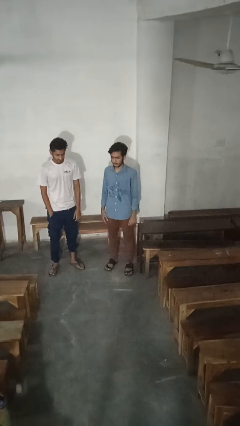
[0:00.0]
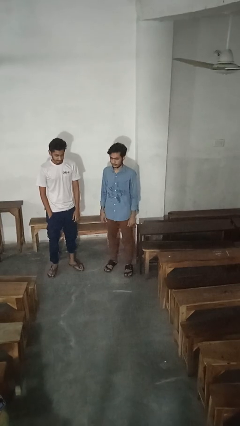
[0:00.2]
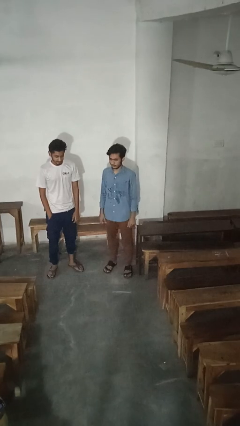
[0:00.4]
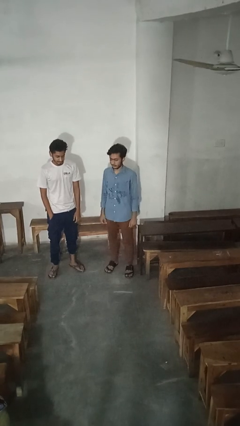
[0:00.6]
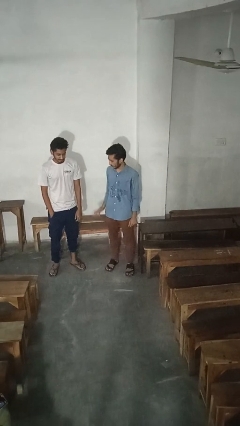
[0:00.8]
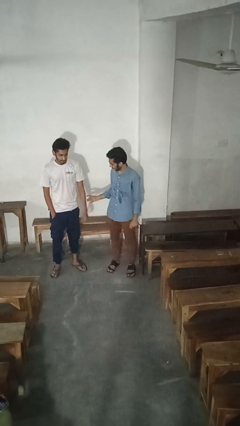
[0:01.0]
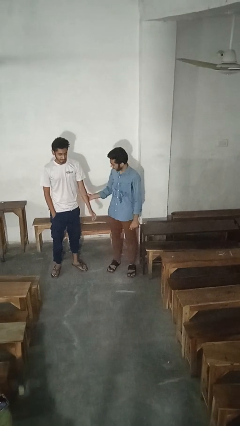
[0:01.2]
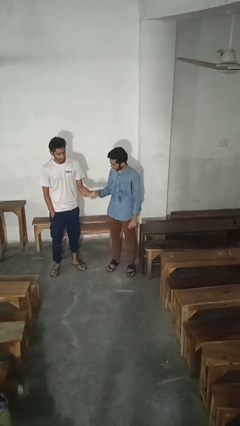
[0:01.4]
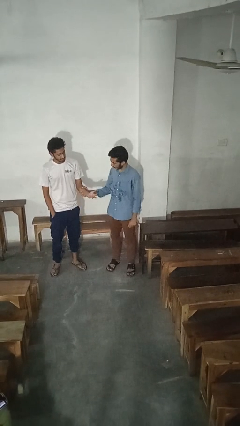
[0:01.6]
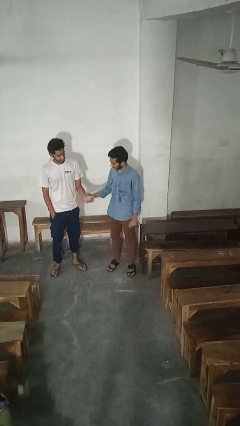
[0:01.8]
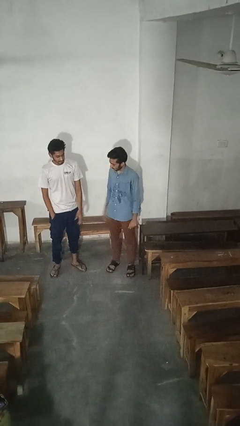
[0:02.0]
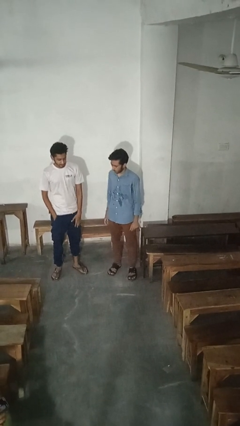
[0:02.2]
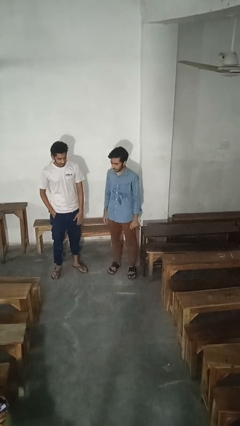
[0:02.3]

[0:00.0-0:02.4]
person grabs person by forearm

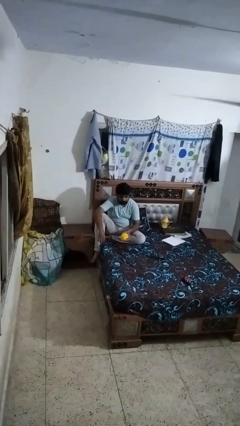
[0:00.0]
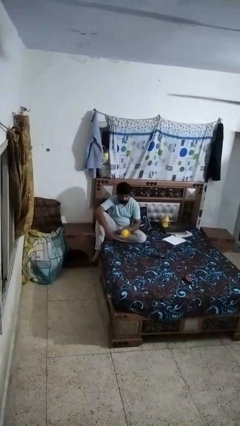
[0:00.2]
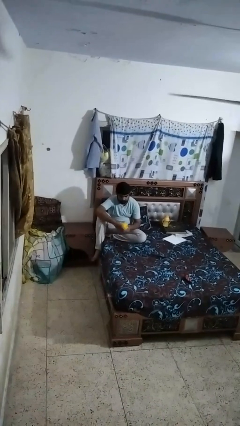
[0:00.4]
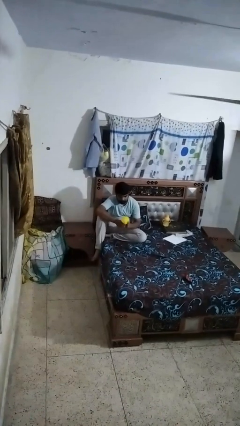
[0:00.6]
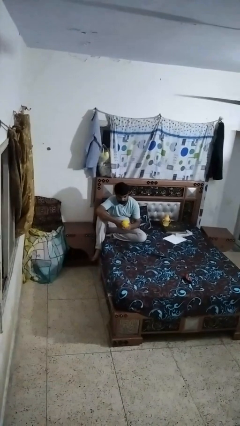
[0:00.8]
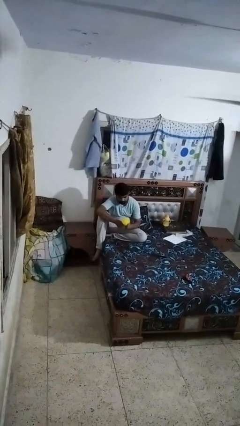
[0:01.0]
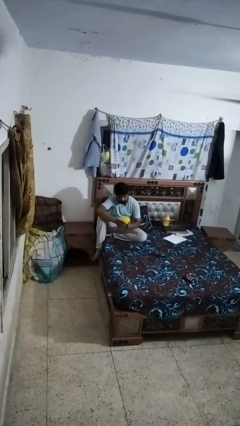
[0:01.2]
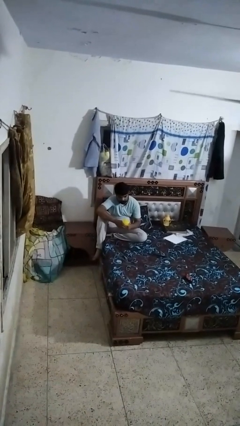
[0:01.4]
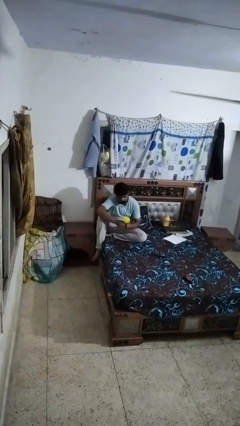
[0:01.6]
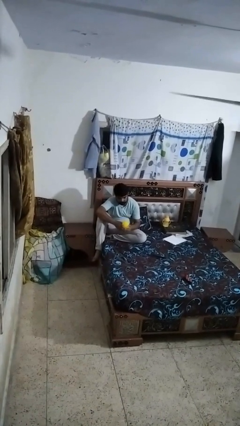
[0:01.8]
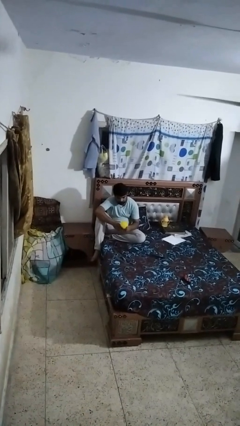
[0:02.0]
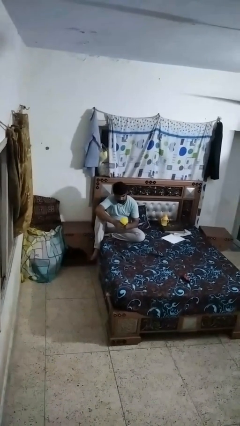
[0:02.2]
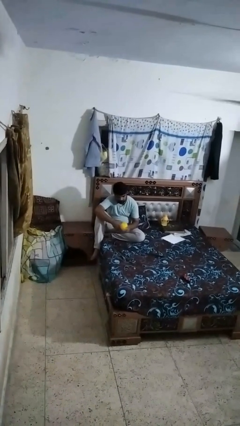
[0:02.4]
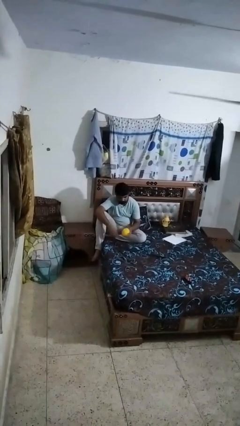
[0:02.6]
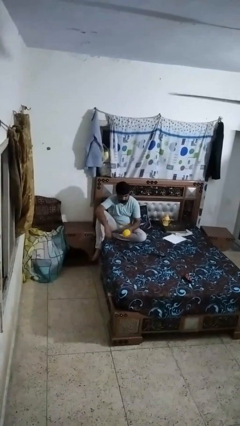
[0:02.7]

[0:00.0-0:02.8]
person squeezes object

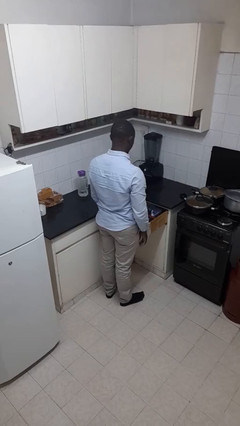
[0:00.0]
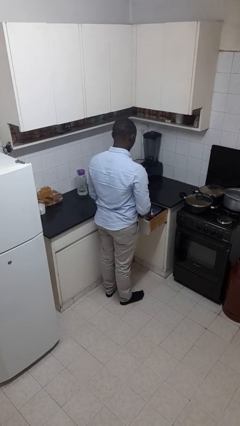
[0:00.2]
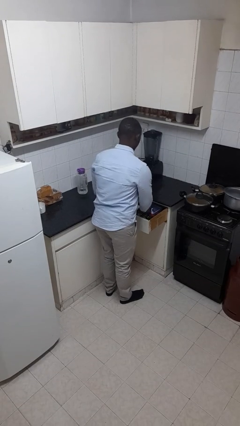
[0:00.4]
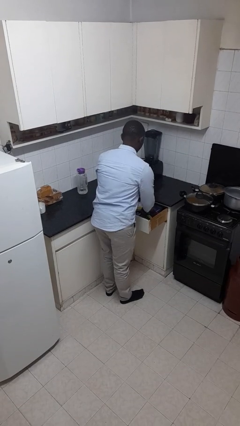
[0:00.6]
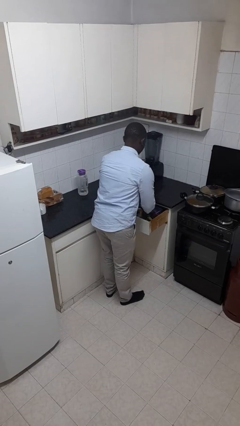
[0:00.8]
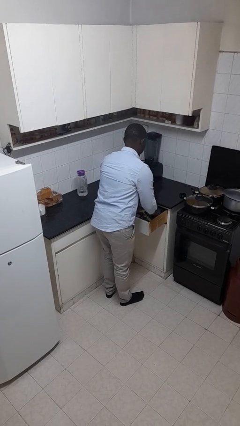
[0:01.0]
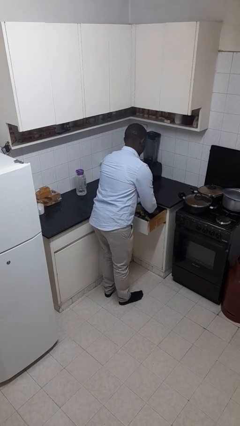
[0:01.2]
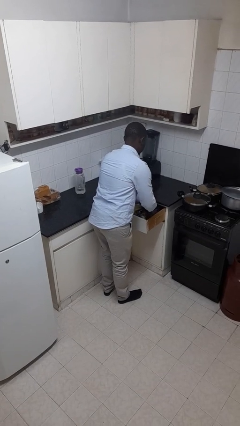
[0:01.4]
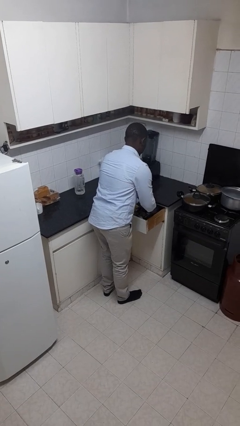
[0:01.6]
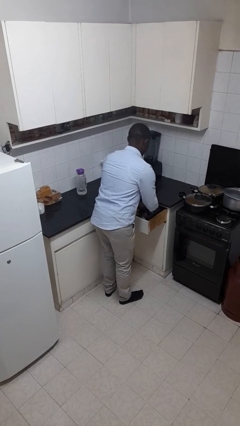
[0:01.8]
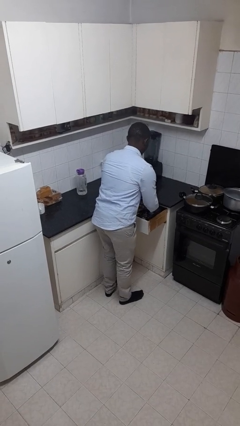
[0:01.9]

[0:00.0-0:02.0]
person searches in kitchen drawer

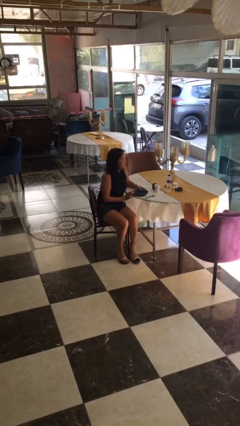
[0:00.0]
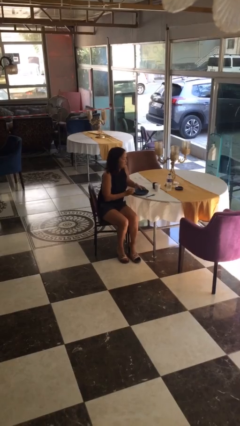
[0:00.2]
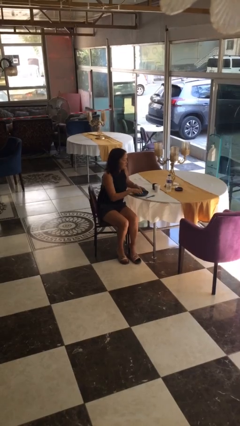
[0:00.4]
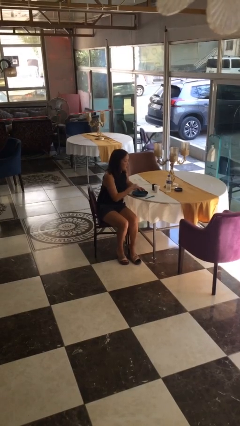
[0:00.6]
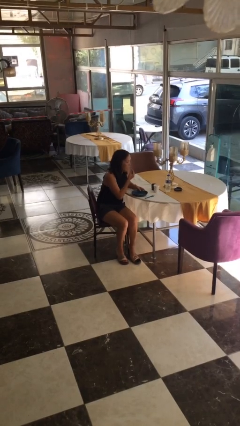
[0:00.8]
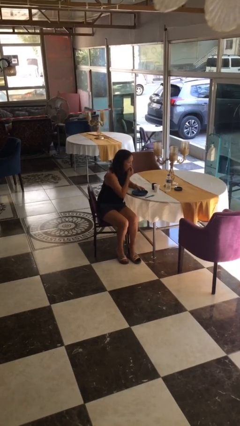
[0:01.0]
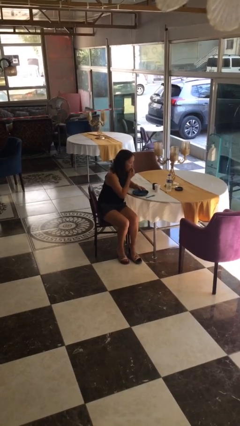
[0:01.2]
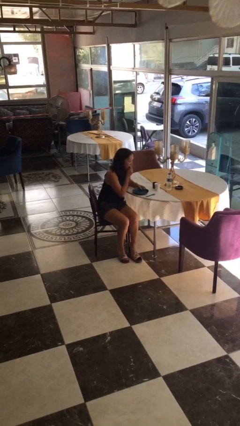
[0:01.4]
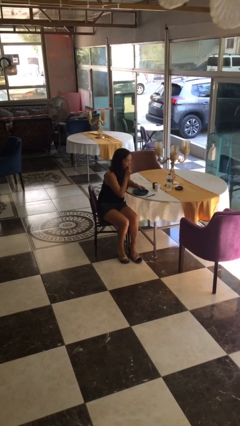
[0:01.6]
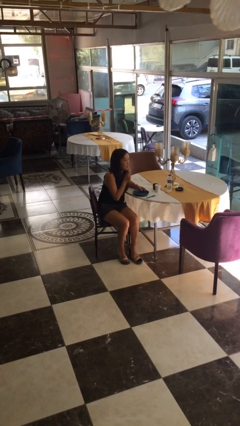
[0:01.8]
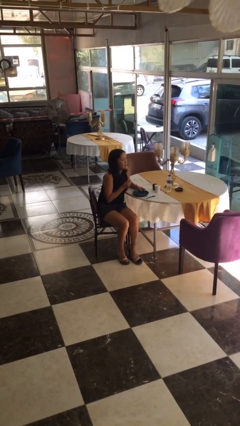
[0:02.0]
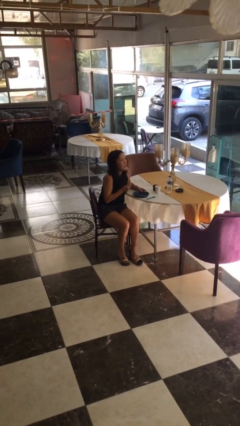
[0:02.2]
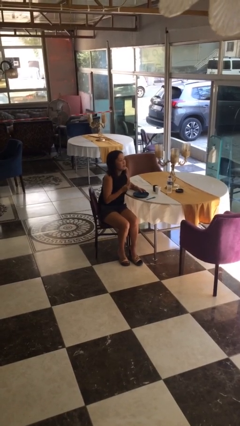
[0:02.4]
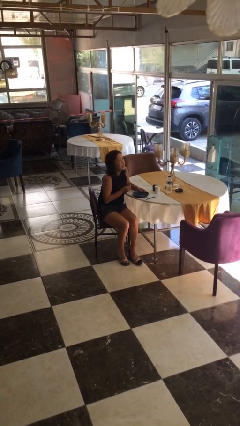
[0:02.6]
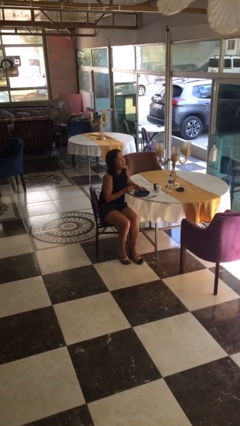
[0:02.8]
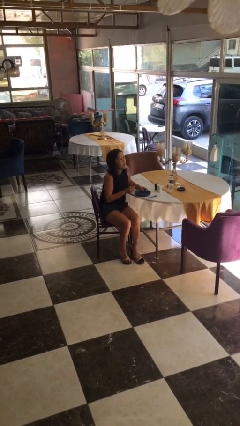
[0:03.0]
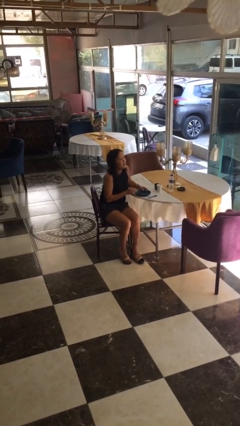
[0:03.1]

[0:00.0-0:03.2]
person eats with hands

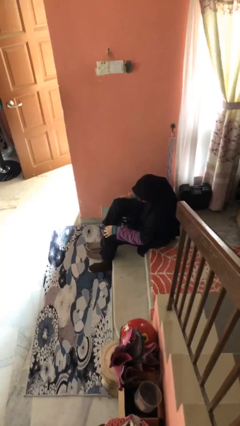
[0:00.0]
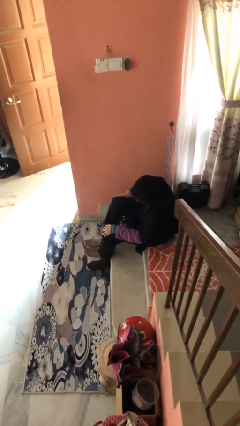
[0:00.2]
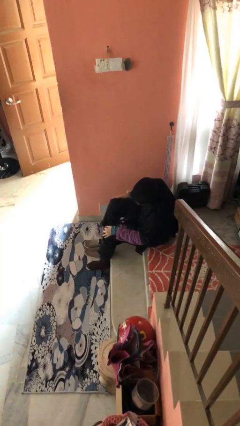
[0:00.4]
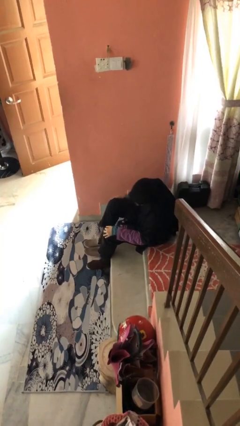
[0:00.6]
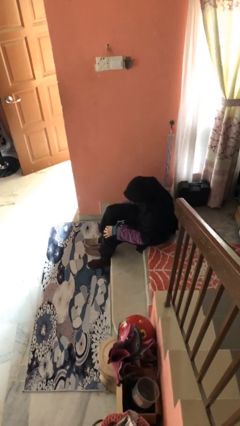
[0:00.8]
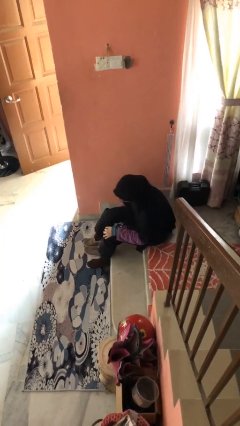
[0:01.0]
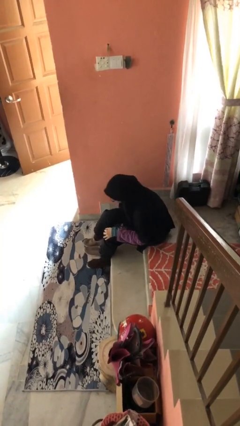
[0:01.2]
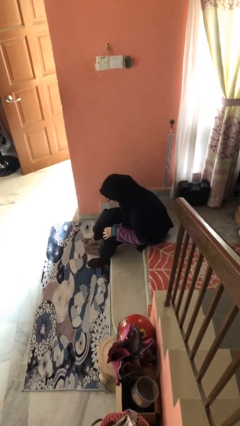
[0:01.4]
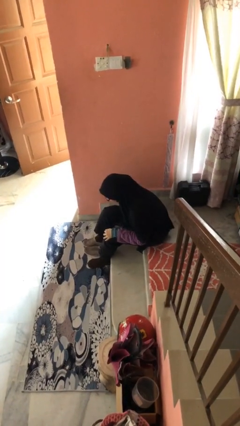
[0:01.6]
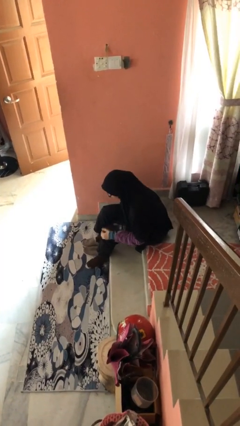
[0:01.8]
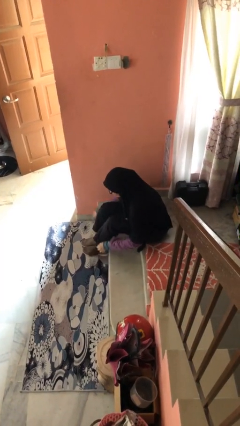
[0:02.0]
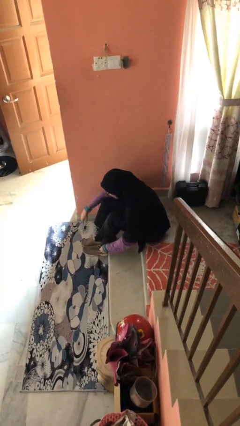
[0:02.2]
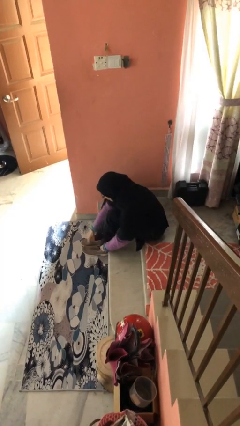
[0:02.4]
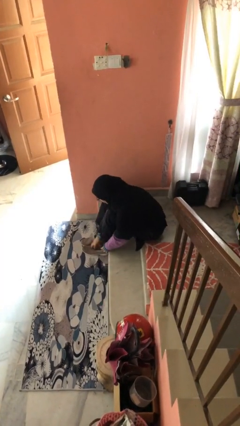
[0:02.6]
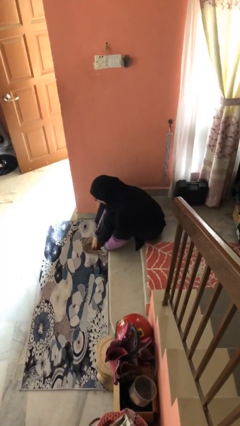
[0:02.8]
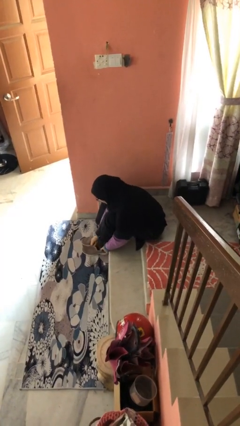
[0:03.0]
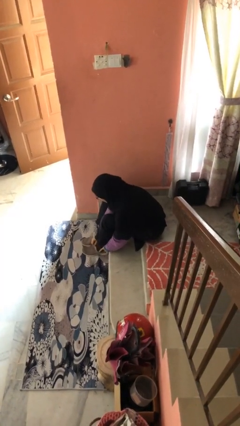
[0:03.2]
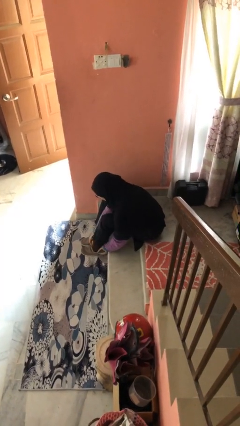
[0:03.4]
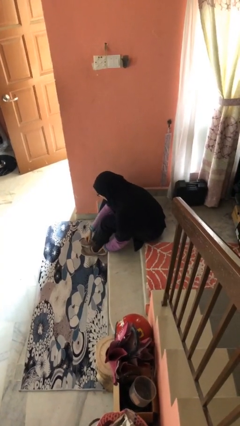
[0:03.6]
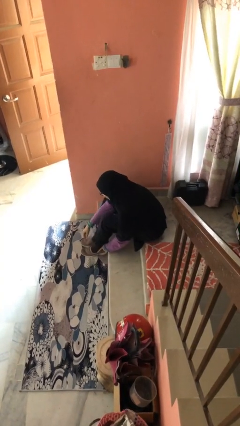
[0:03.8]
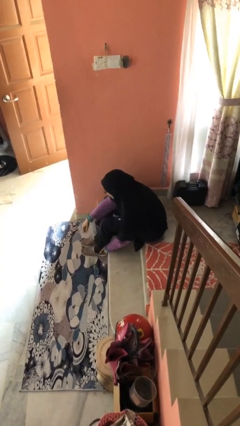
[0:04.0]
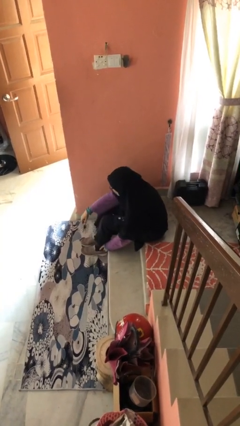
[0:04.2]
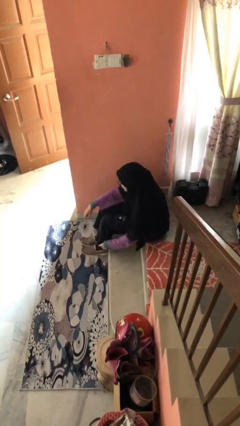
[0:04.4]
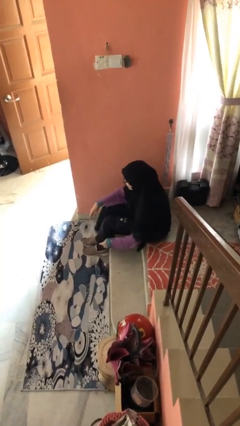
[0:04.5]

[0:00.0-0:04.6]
person puts on shoes

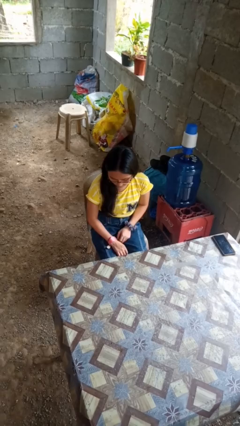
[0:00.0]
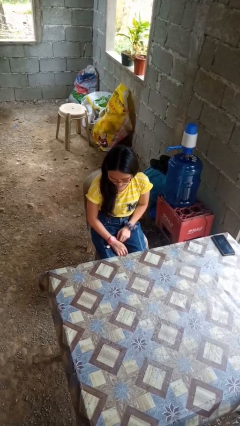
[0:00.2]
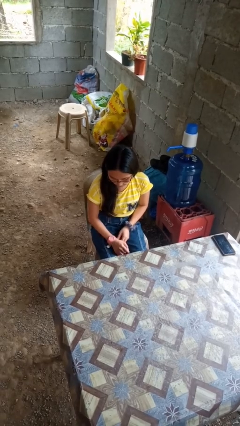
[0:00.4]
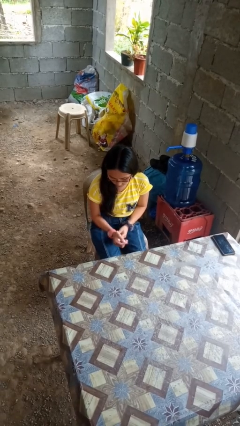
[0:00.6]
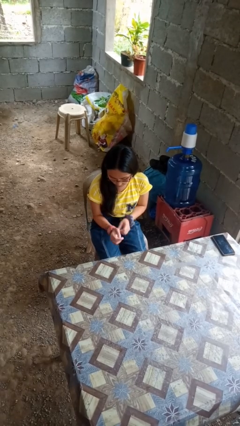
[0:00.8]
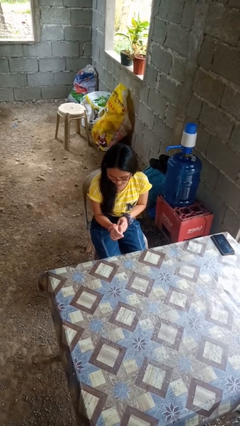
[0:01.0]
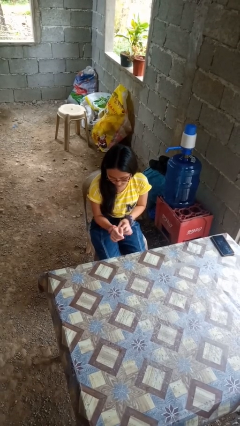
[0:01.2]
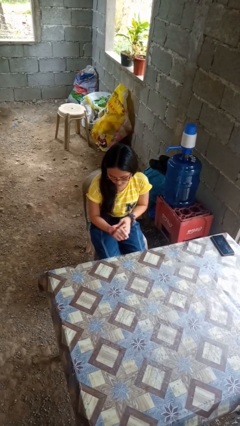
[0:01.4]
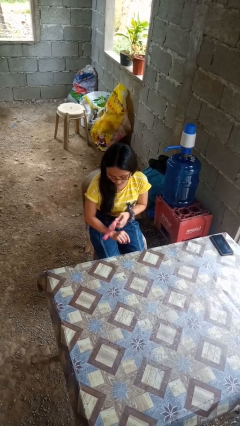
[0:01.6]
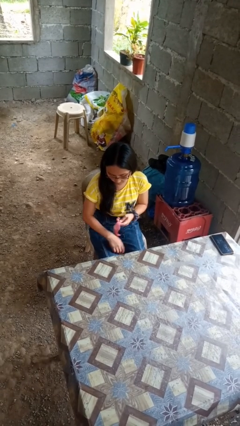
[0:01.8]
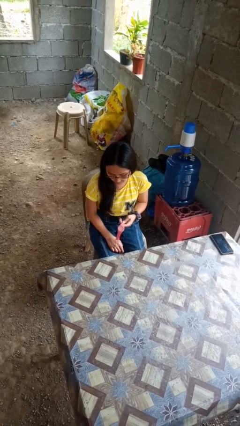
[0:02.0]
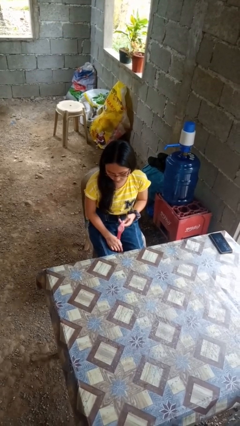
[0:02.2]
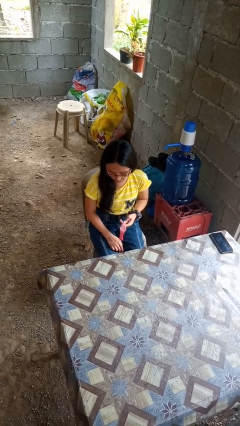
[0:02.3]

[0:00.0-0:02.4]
person takes off wristwatch
